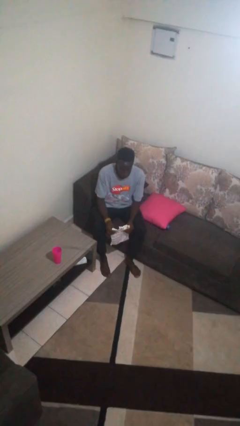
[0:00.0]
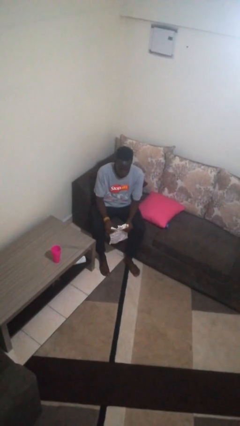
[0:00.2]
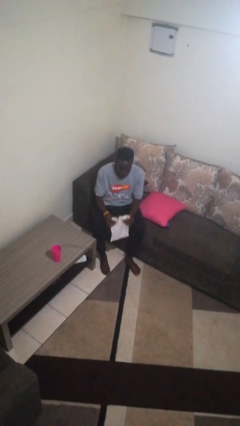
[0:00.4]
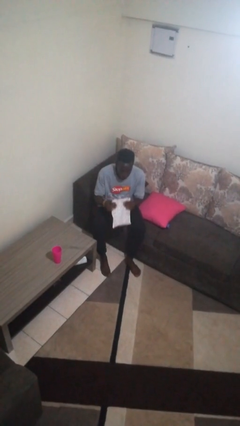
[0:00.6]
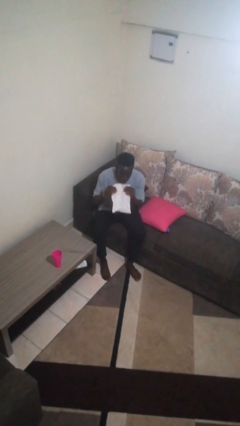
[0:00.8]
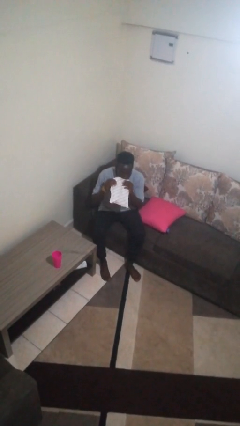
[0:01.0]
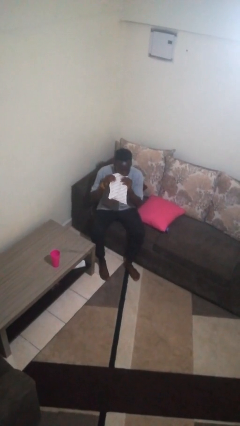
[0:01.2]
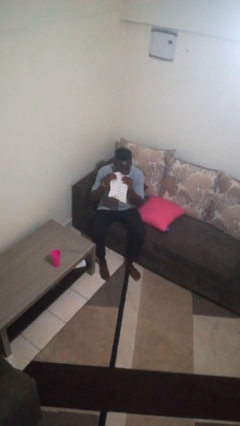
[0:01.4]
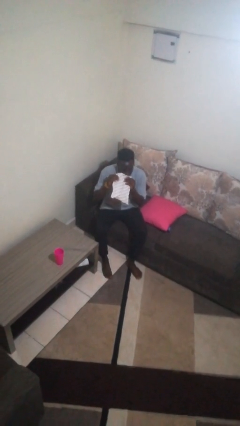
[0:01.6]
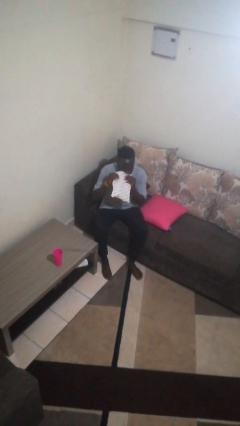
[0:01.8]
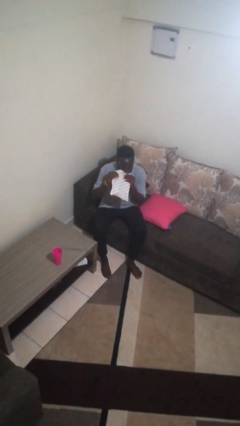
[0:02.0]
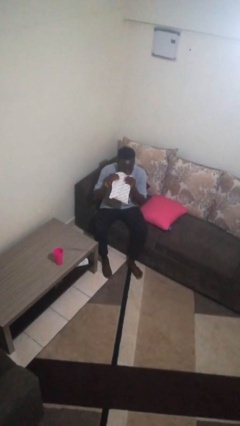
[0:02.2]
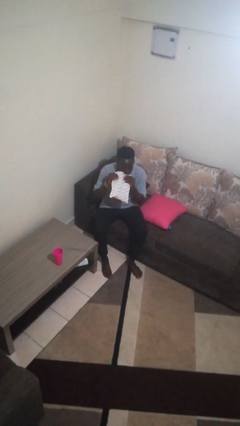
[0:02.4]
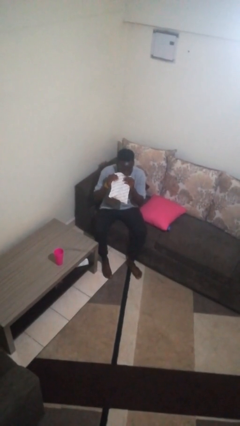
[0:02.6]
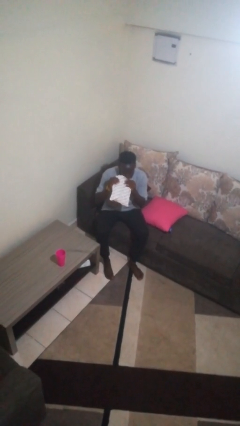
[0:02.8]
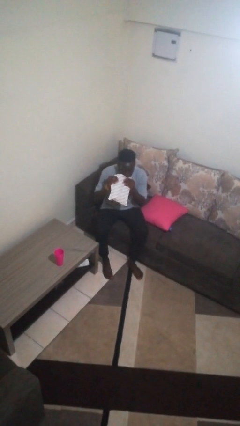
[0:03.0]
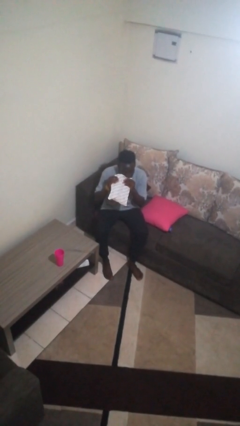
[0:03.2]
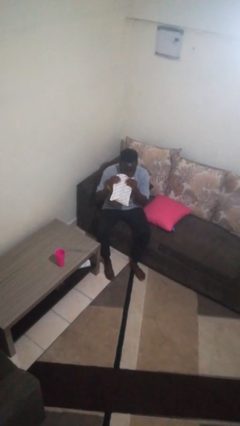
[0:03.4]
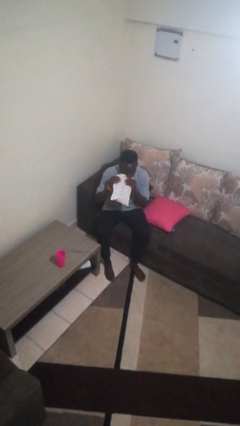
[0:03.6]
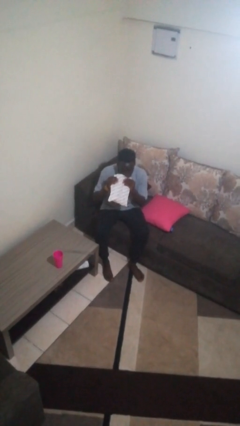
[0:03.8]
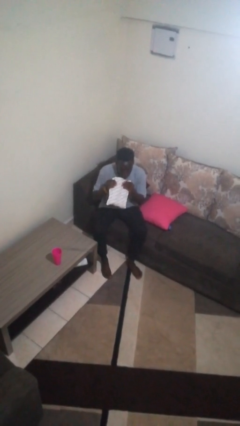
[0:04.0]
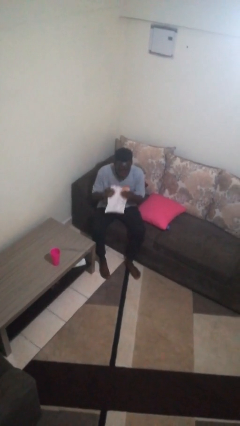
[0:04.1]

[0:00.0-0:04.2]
person eats snack from bag

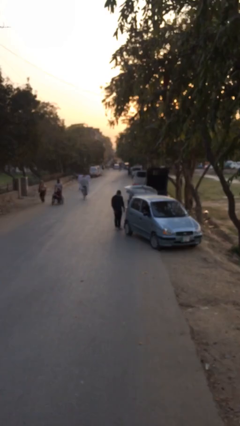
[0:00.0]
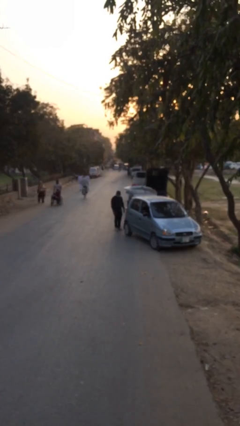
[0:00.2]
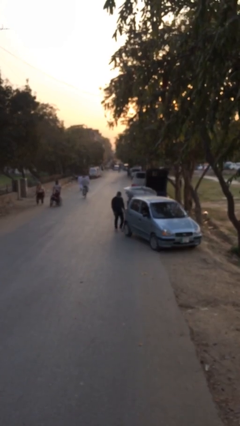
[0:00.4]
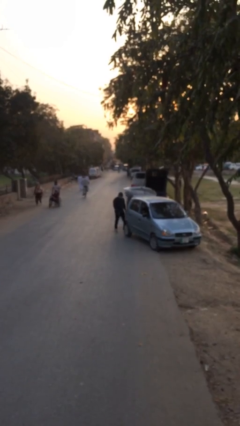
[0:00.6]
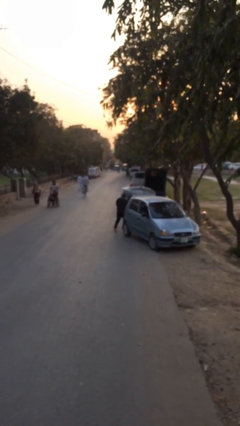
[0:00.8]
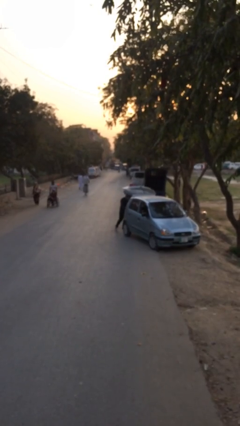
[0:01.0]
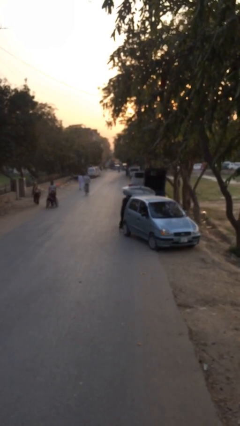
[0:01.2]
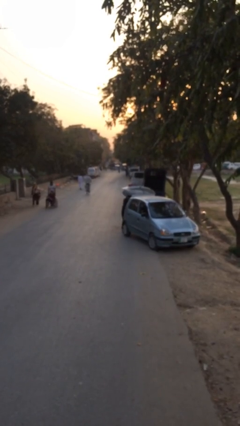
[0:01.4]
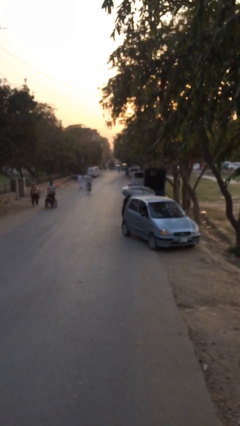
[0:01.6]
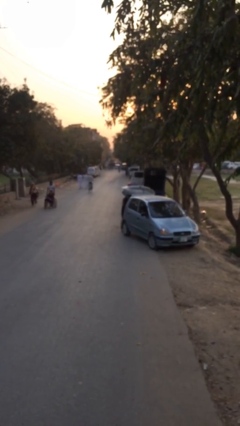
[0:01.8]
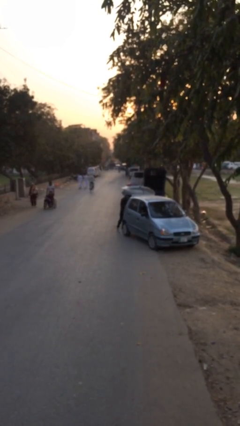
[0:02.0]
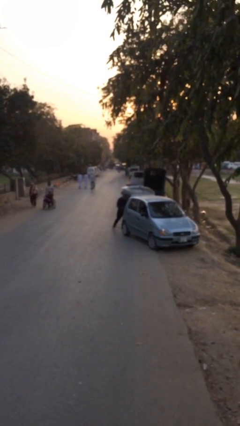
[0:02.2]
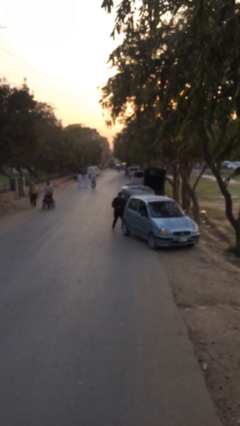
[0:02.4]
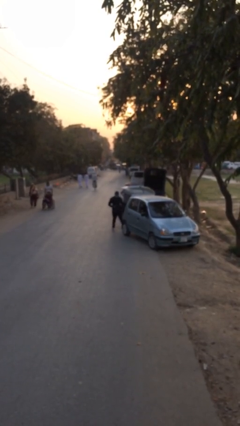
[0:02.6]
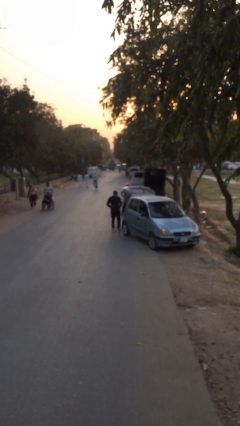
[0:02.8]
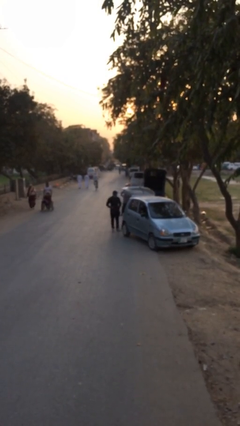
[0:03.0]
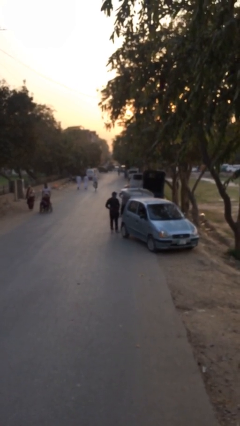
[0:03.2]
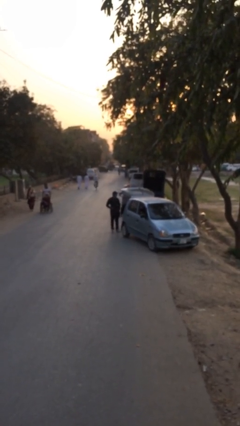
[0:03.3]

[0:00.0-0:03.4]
person unloads car

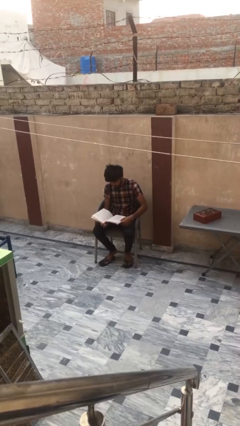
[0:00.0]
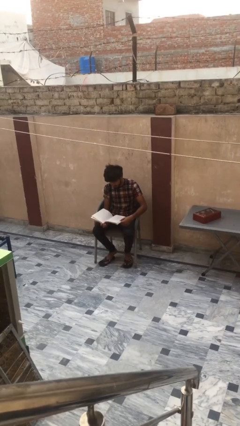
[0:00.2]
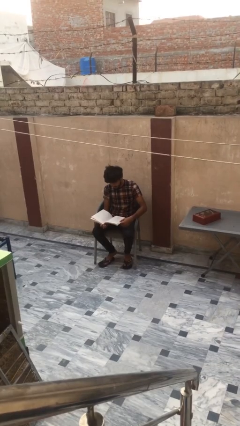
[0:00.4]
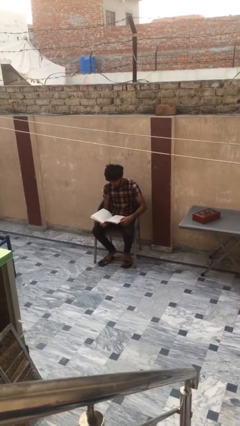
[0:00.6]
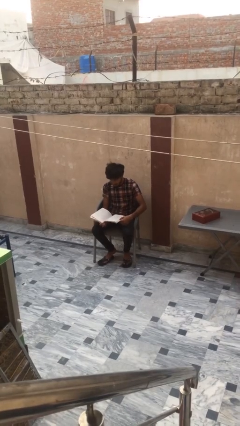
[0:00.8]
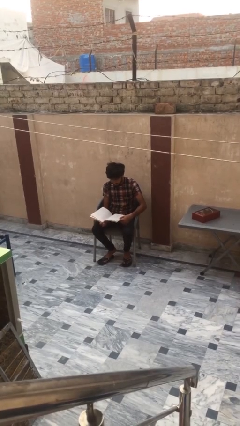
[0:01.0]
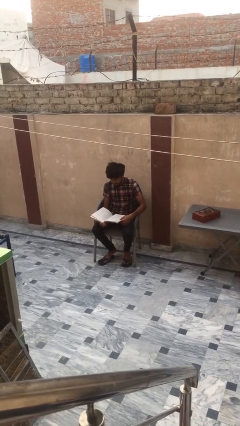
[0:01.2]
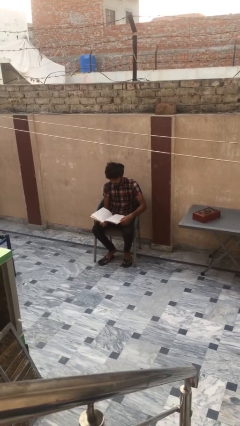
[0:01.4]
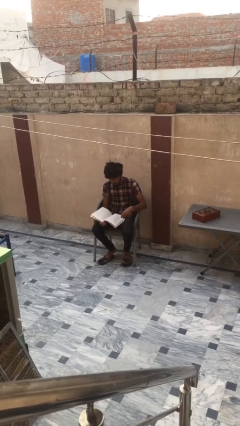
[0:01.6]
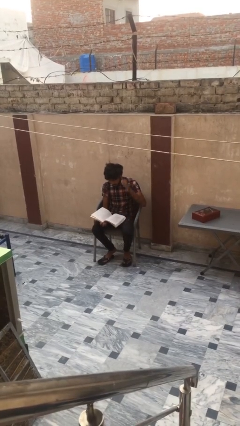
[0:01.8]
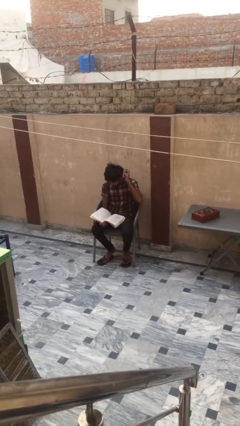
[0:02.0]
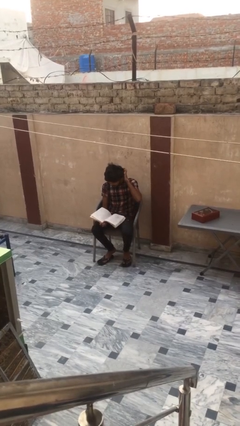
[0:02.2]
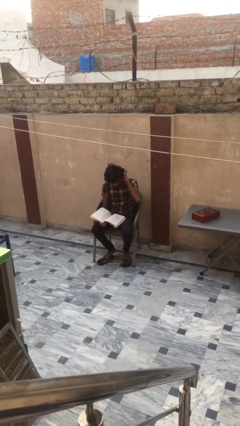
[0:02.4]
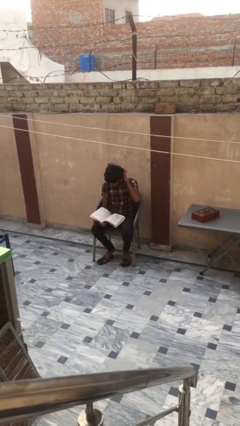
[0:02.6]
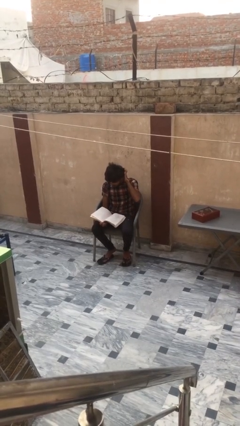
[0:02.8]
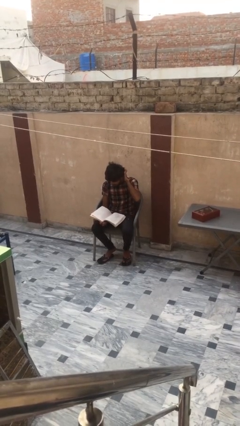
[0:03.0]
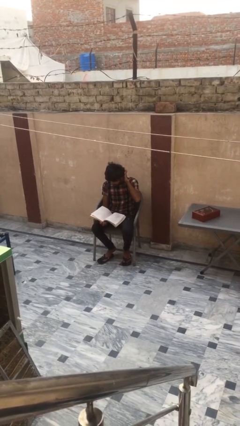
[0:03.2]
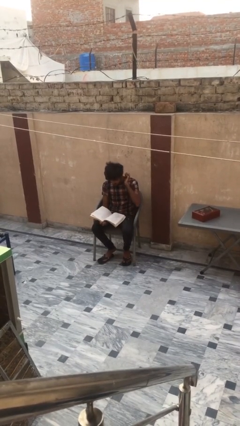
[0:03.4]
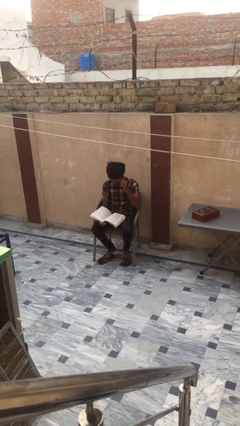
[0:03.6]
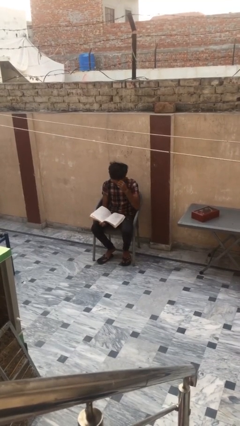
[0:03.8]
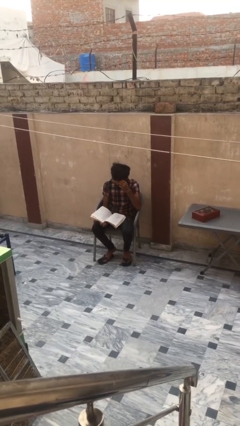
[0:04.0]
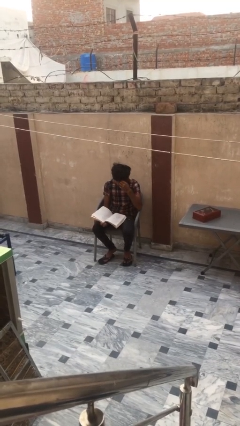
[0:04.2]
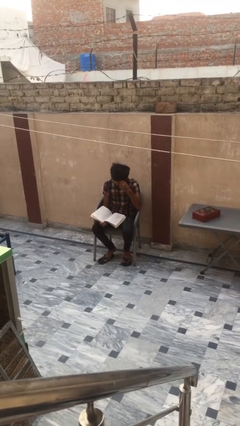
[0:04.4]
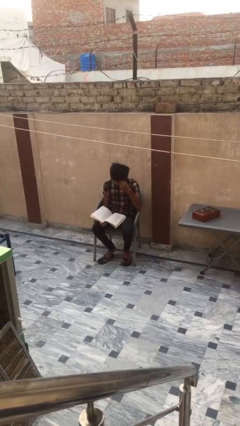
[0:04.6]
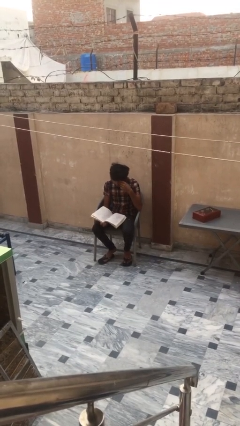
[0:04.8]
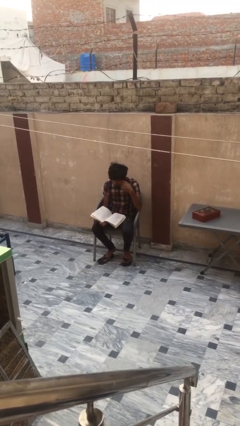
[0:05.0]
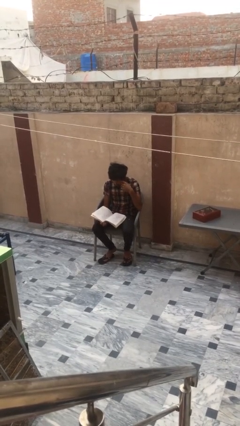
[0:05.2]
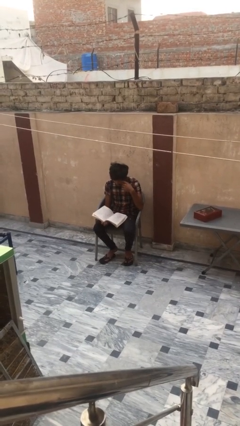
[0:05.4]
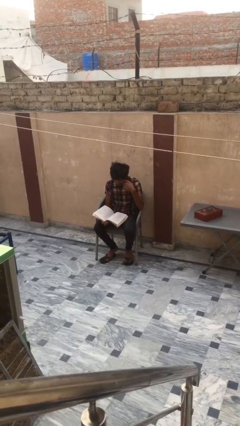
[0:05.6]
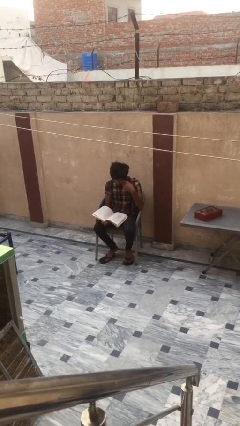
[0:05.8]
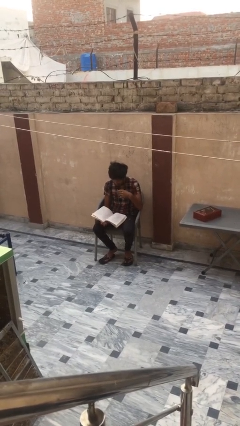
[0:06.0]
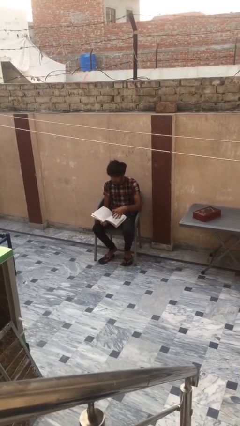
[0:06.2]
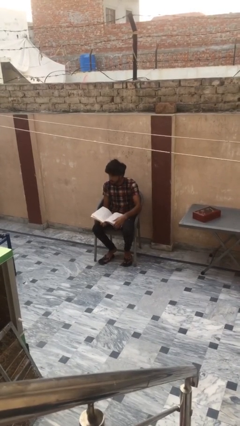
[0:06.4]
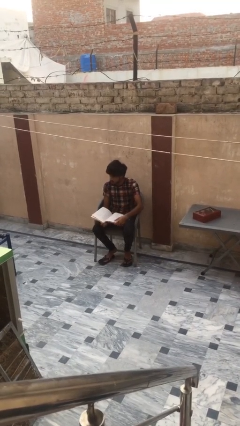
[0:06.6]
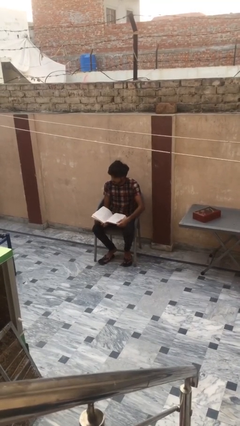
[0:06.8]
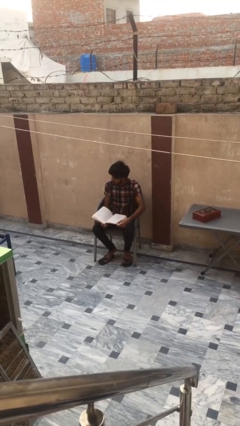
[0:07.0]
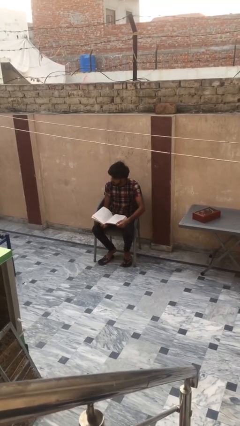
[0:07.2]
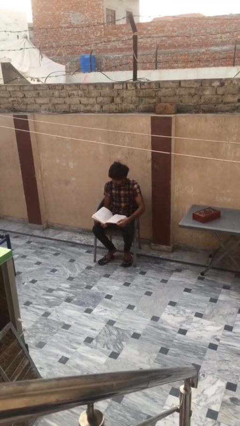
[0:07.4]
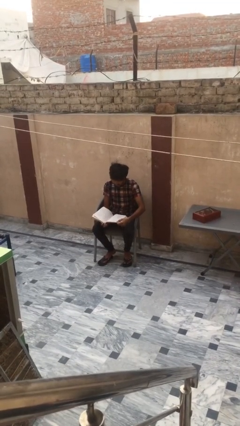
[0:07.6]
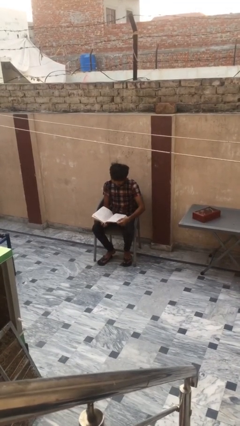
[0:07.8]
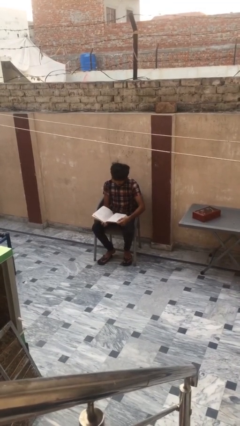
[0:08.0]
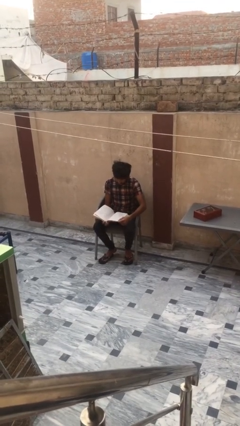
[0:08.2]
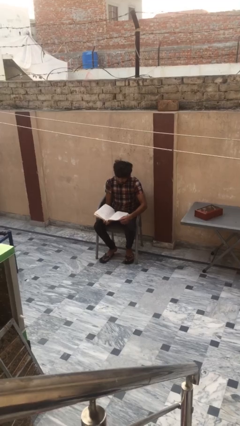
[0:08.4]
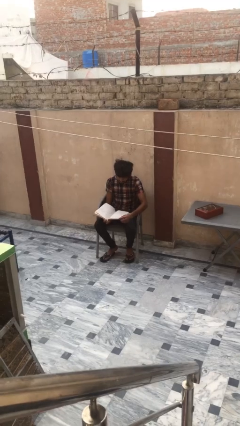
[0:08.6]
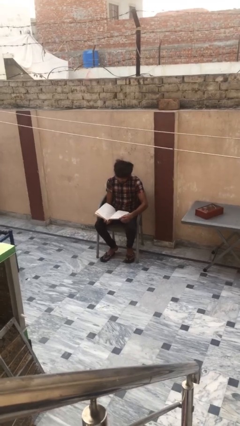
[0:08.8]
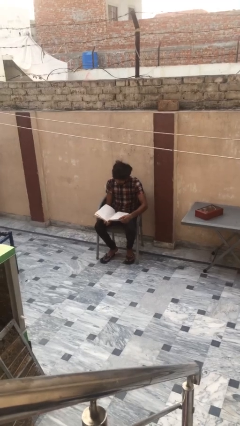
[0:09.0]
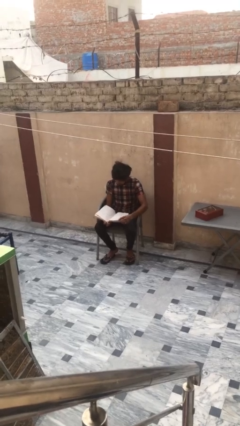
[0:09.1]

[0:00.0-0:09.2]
person reads document

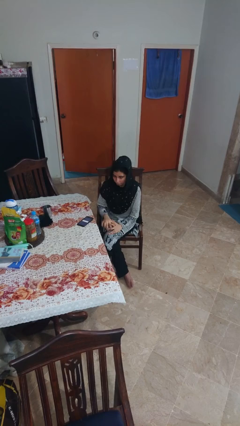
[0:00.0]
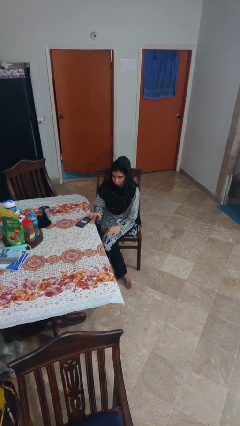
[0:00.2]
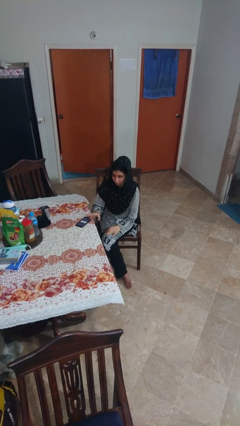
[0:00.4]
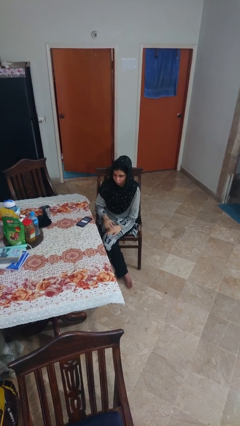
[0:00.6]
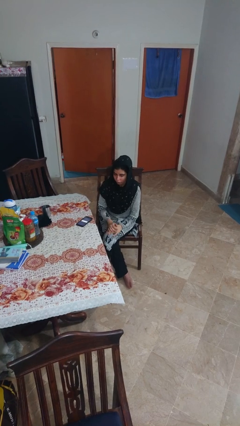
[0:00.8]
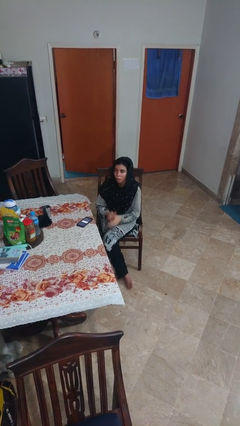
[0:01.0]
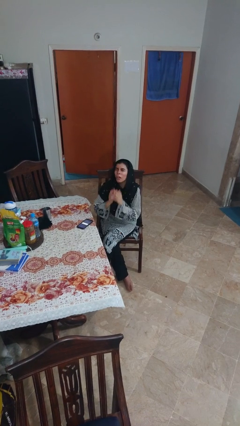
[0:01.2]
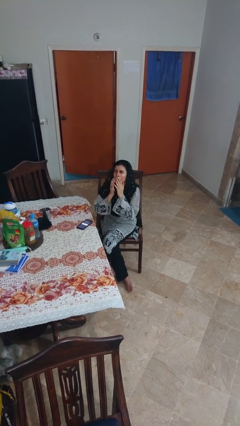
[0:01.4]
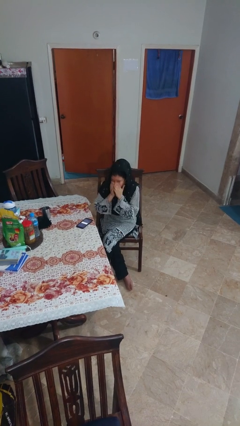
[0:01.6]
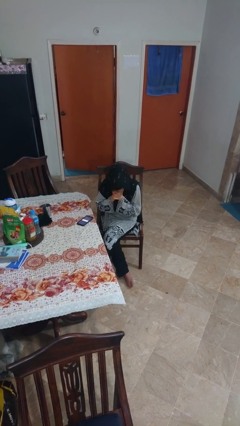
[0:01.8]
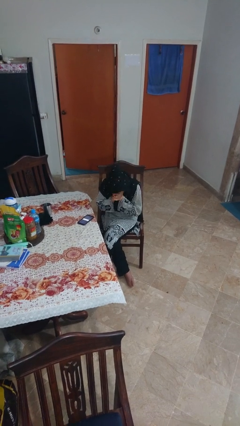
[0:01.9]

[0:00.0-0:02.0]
person sneezes into hand
